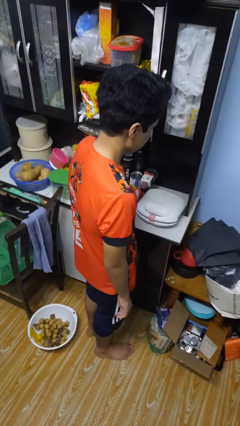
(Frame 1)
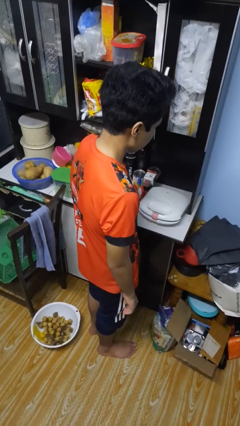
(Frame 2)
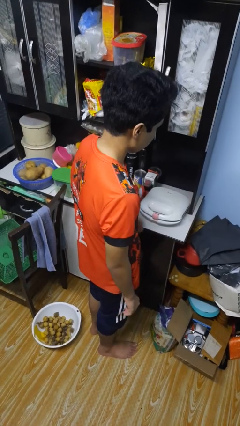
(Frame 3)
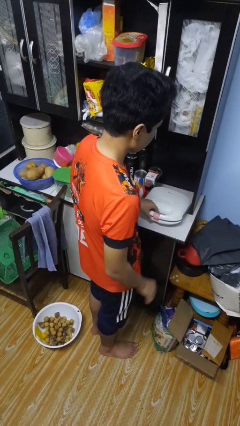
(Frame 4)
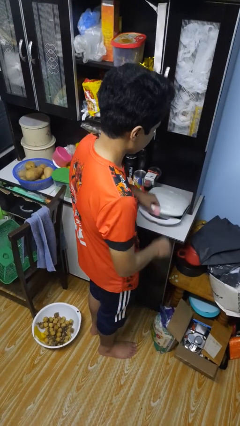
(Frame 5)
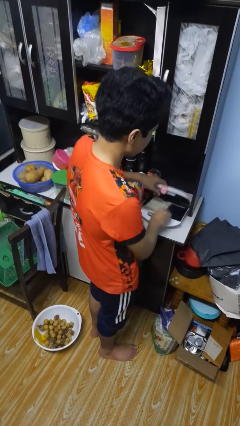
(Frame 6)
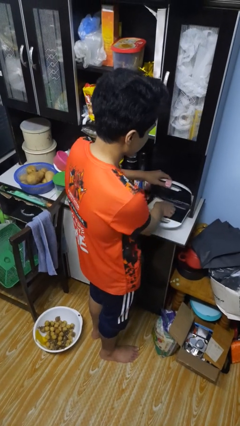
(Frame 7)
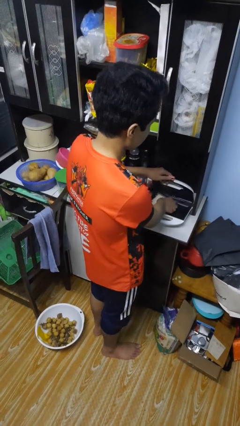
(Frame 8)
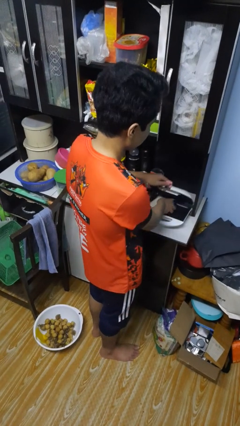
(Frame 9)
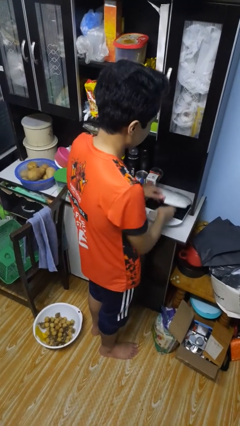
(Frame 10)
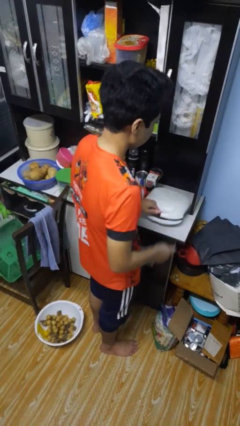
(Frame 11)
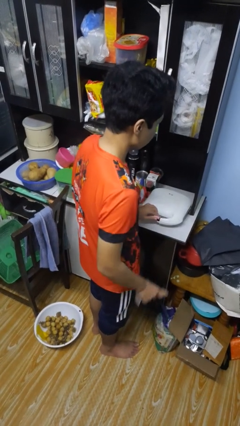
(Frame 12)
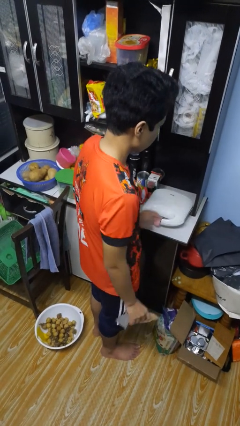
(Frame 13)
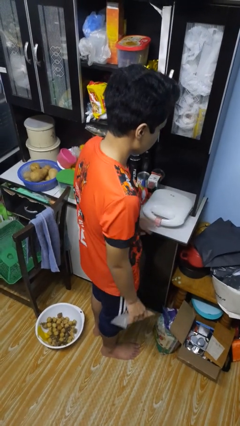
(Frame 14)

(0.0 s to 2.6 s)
person takes object from toaster

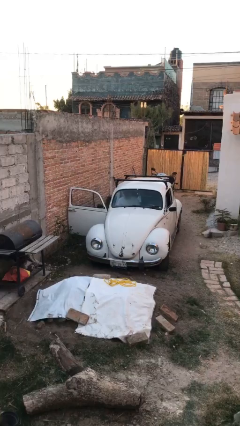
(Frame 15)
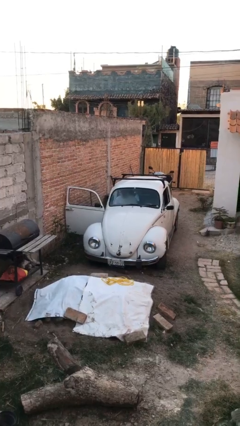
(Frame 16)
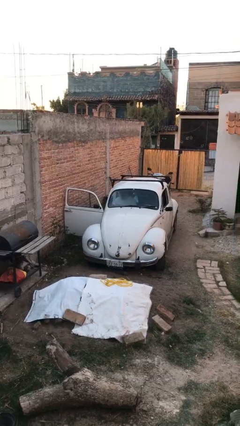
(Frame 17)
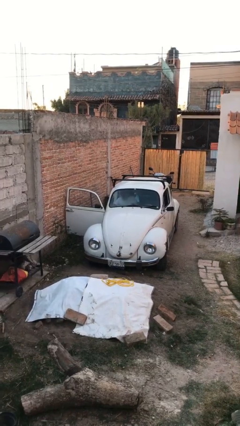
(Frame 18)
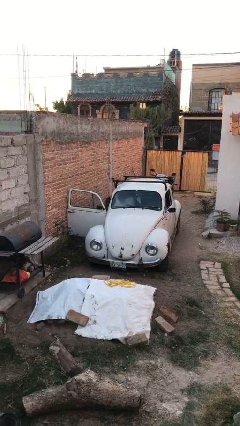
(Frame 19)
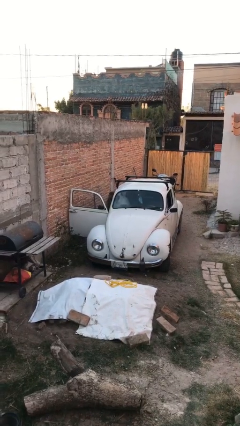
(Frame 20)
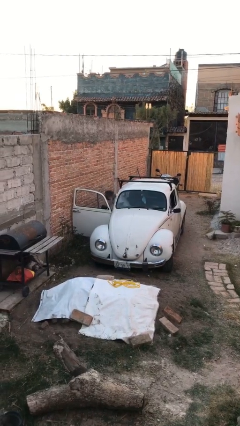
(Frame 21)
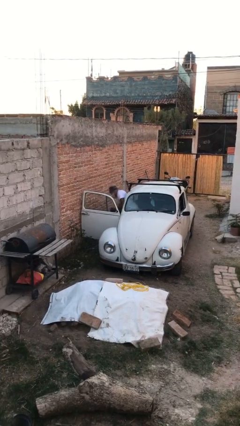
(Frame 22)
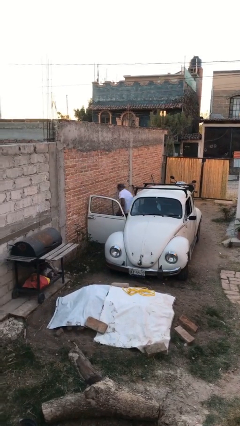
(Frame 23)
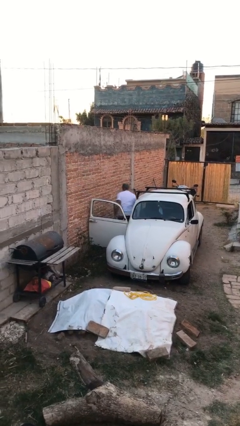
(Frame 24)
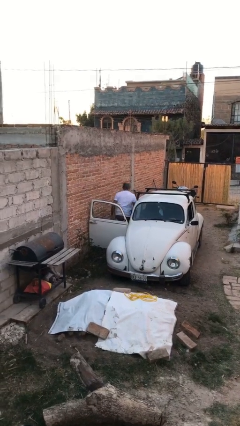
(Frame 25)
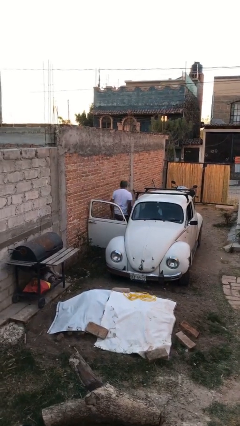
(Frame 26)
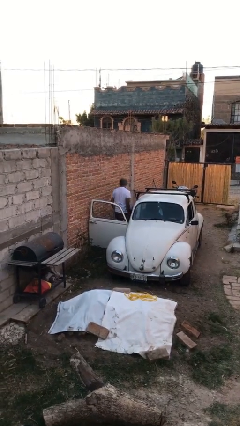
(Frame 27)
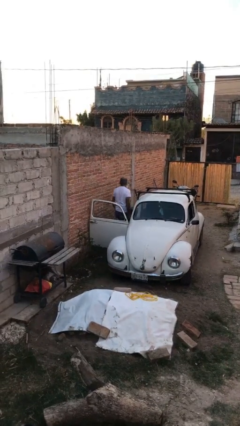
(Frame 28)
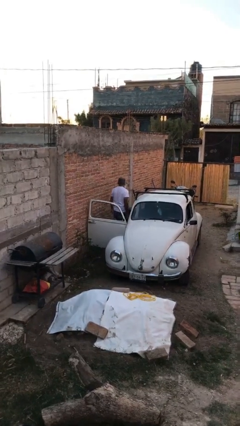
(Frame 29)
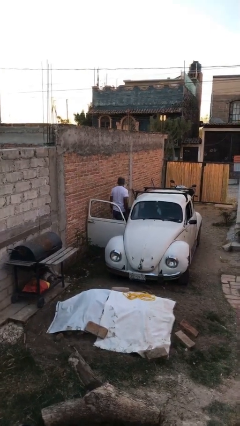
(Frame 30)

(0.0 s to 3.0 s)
person exits car

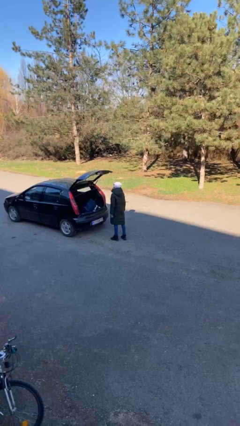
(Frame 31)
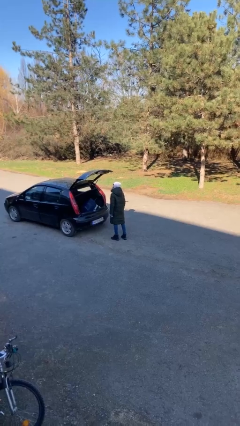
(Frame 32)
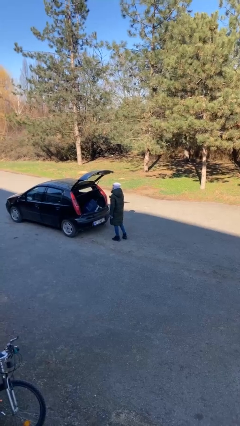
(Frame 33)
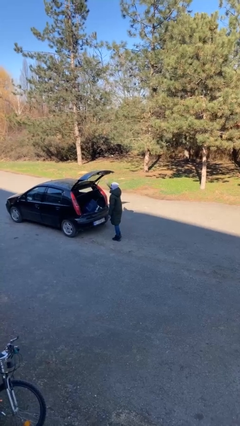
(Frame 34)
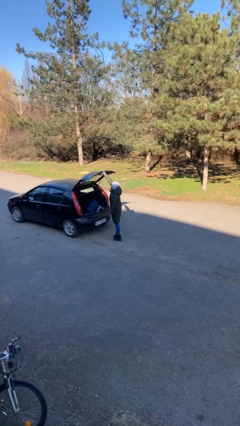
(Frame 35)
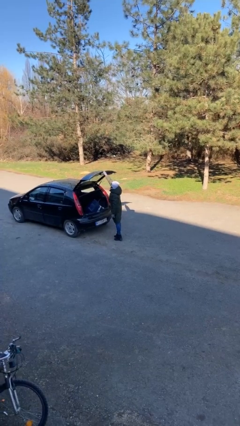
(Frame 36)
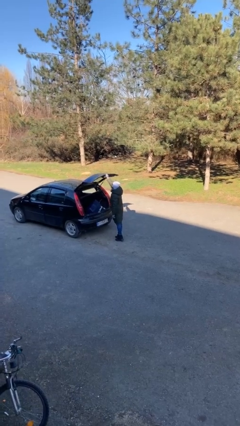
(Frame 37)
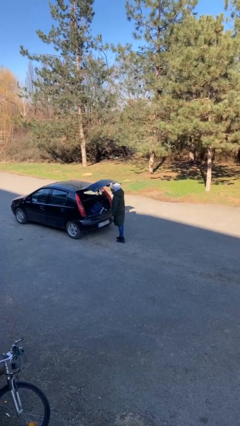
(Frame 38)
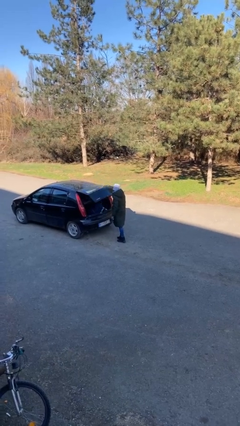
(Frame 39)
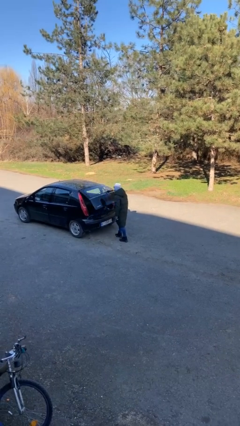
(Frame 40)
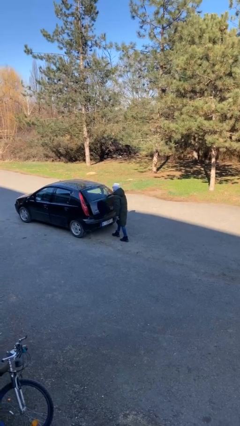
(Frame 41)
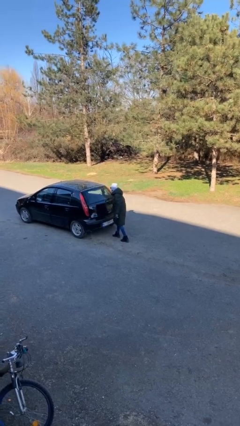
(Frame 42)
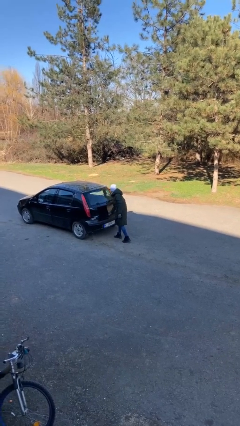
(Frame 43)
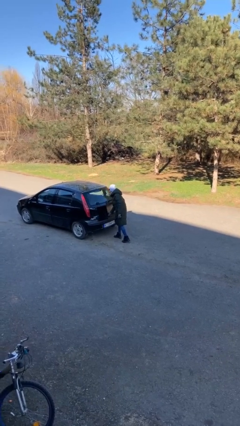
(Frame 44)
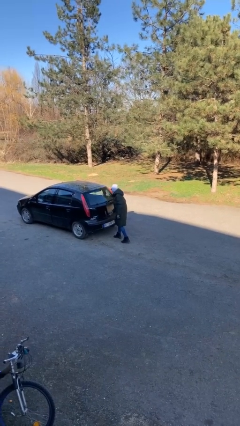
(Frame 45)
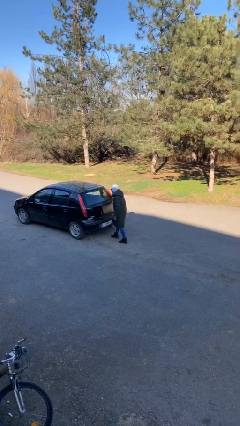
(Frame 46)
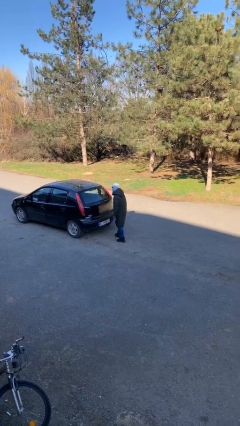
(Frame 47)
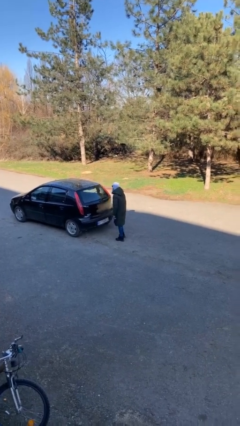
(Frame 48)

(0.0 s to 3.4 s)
person closes car trunk

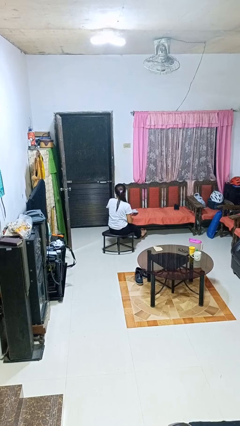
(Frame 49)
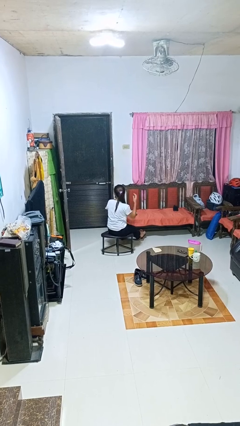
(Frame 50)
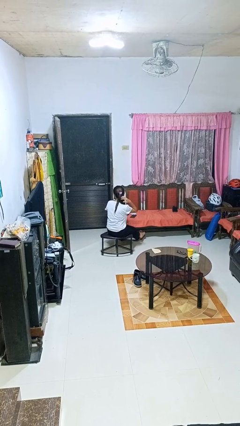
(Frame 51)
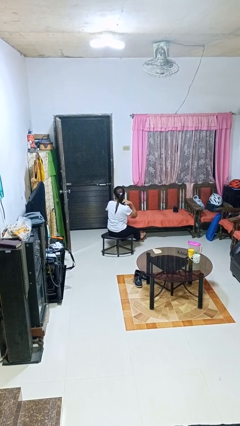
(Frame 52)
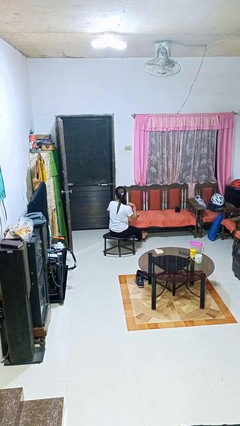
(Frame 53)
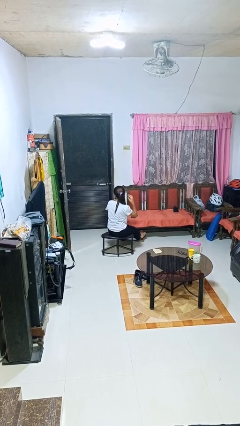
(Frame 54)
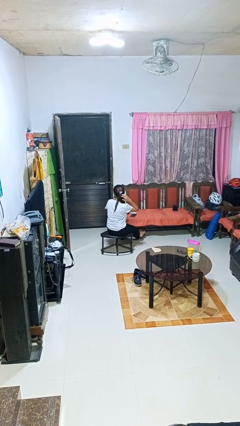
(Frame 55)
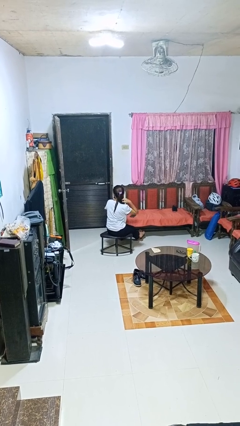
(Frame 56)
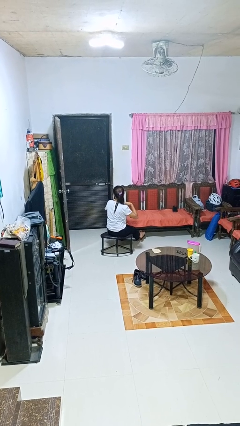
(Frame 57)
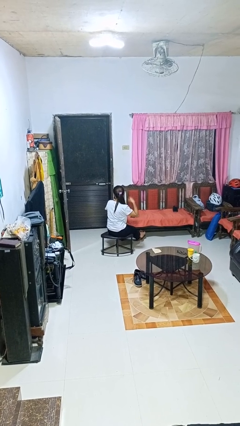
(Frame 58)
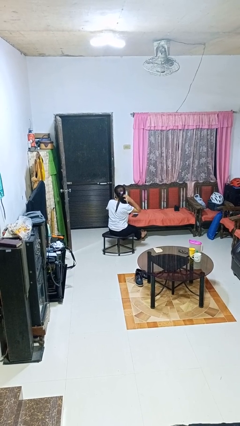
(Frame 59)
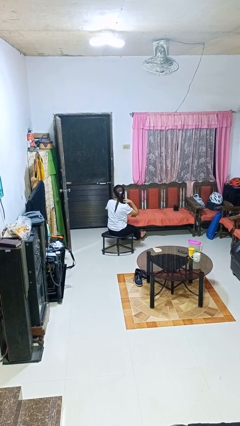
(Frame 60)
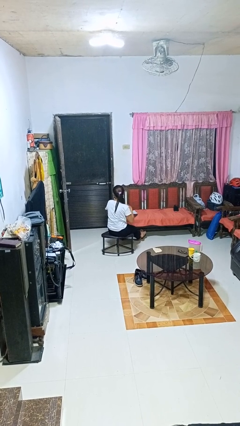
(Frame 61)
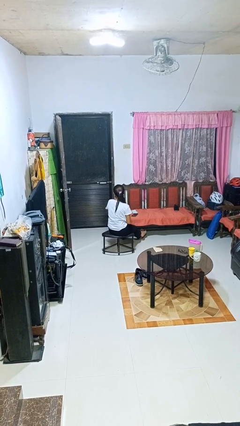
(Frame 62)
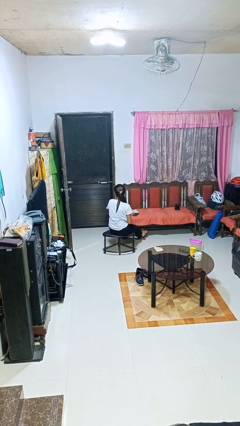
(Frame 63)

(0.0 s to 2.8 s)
person strokes hair

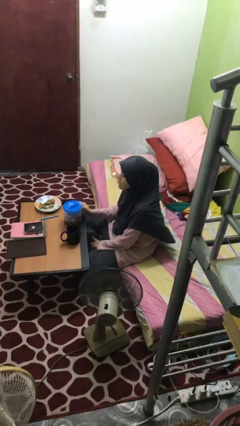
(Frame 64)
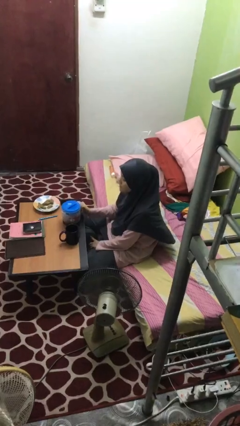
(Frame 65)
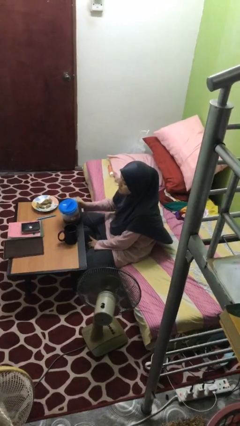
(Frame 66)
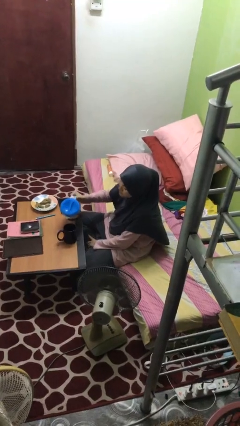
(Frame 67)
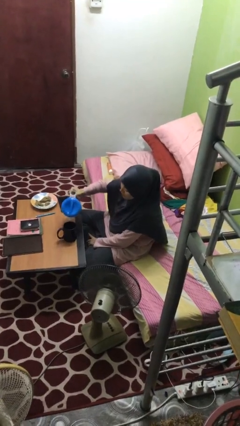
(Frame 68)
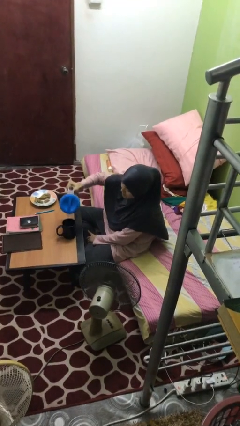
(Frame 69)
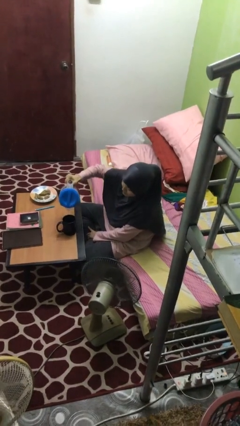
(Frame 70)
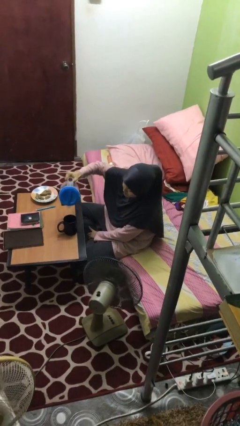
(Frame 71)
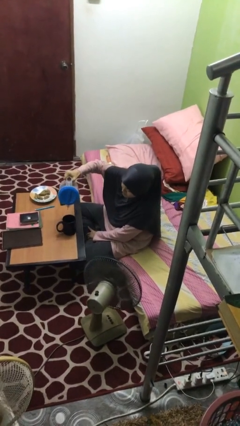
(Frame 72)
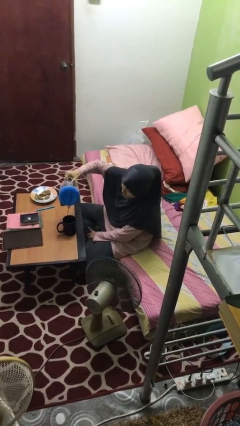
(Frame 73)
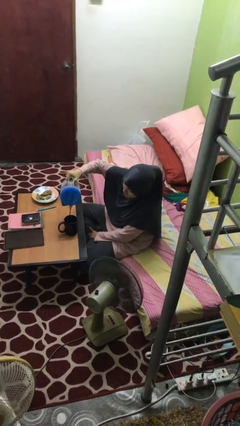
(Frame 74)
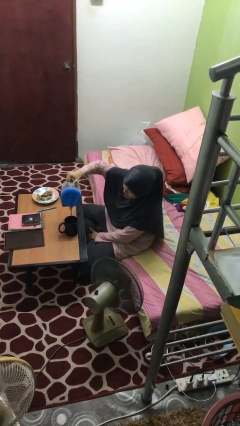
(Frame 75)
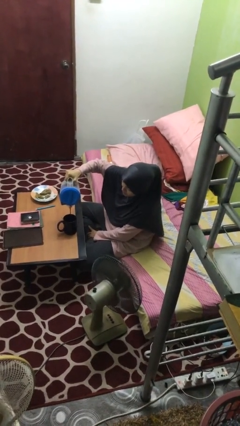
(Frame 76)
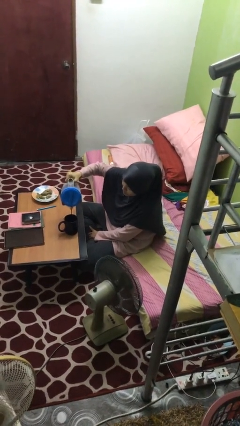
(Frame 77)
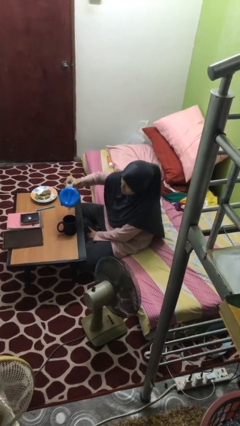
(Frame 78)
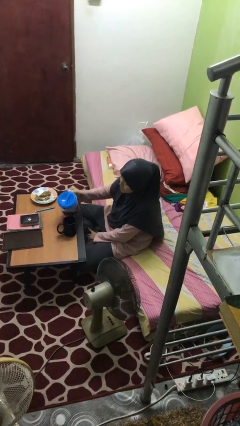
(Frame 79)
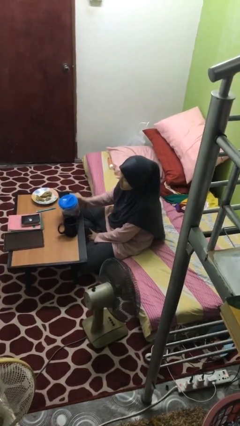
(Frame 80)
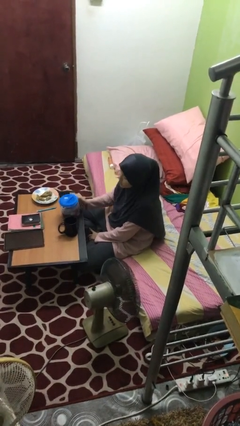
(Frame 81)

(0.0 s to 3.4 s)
person pours coffee into mug

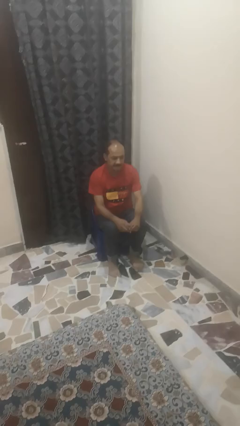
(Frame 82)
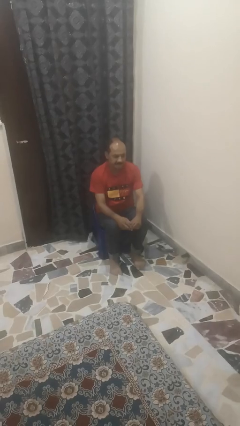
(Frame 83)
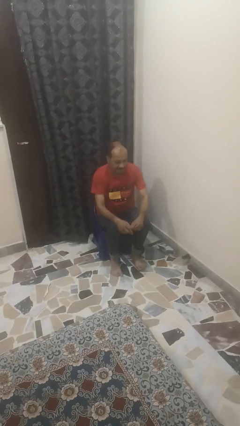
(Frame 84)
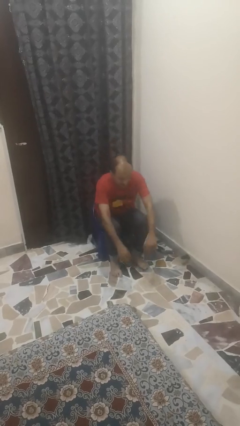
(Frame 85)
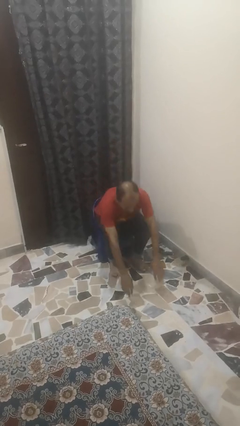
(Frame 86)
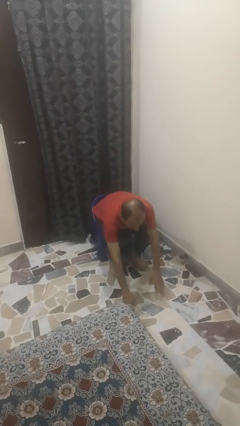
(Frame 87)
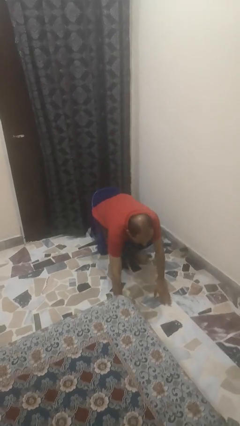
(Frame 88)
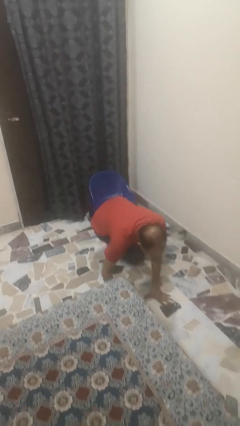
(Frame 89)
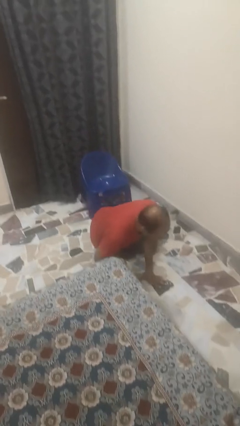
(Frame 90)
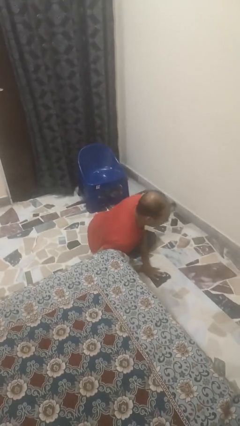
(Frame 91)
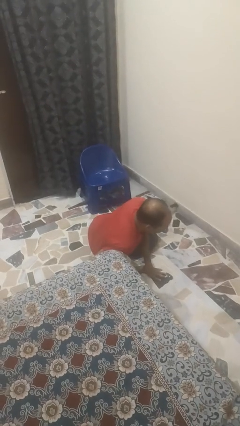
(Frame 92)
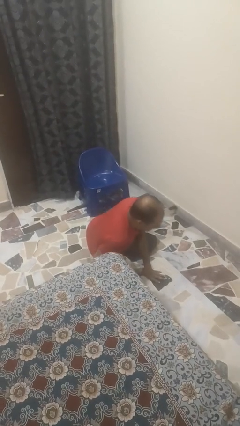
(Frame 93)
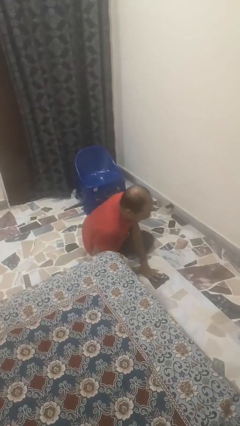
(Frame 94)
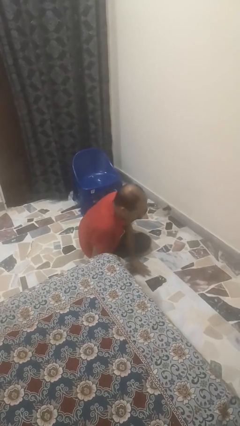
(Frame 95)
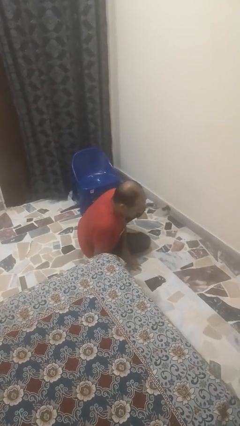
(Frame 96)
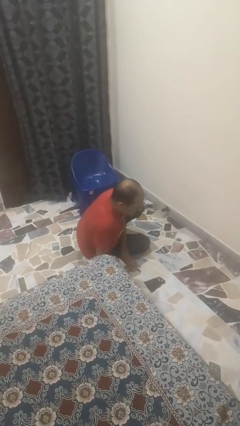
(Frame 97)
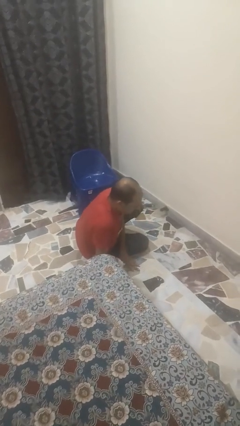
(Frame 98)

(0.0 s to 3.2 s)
person falls from chair
